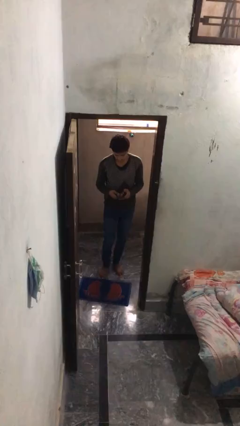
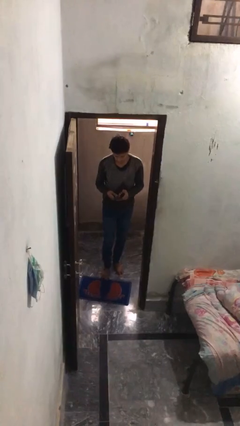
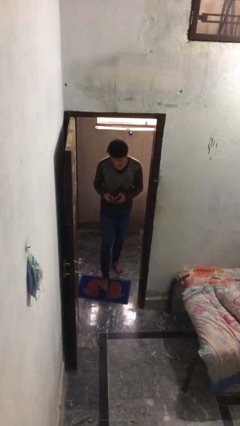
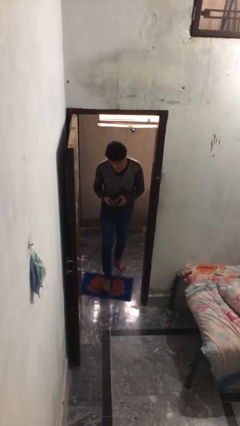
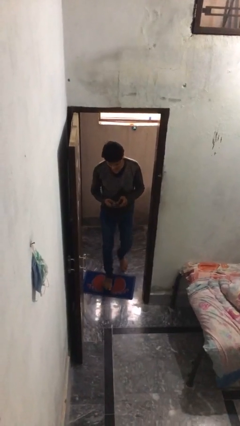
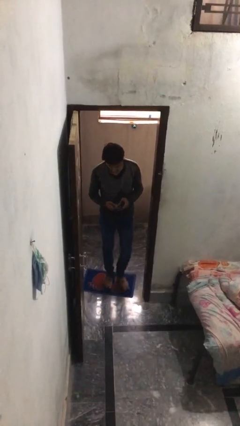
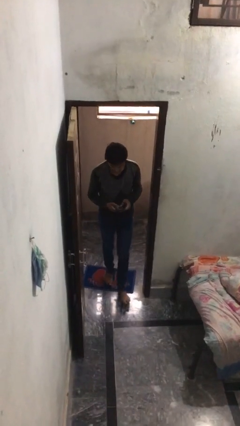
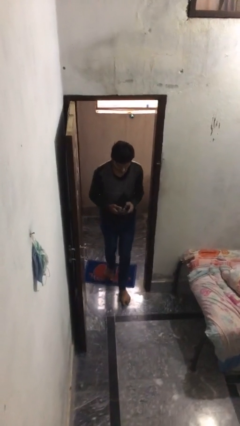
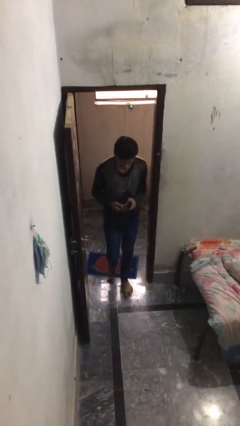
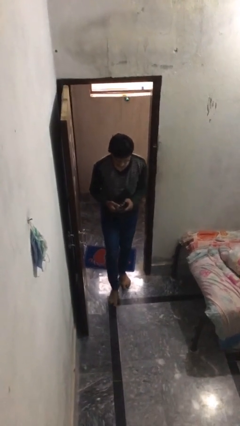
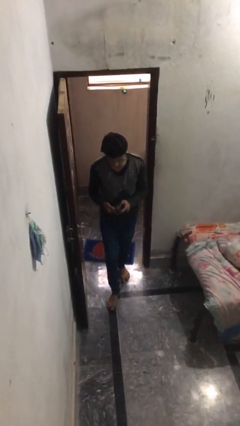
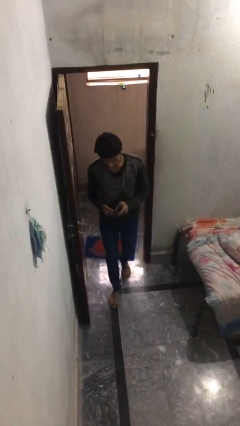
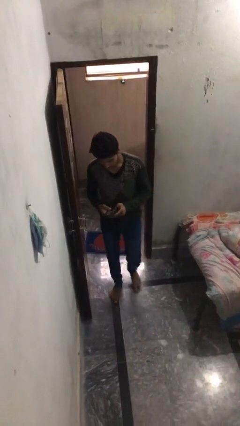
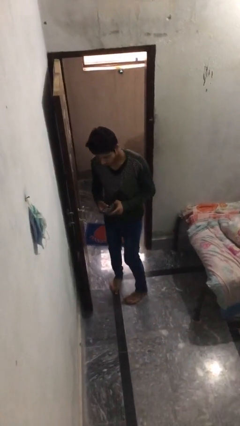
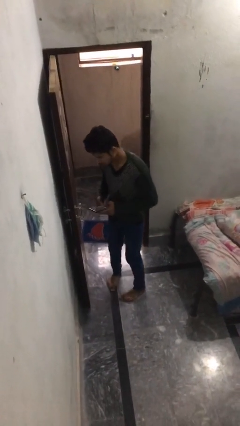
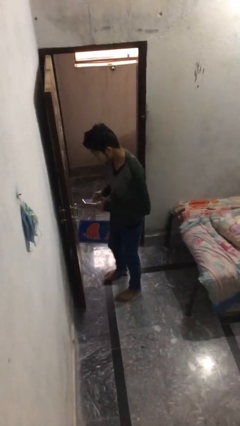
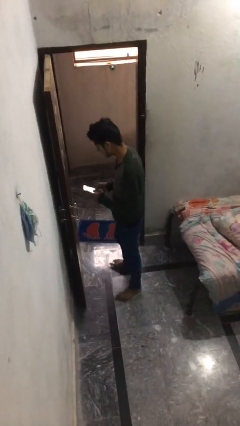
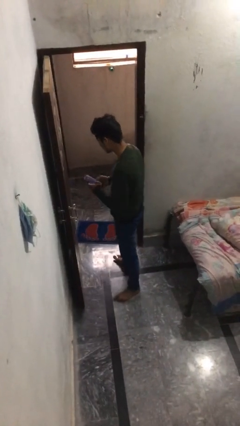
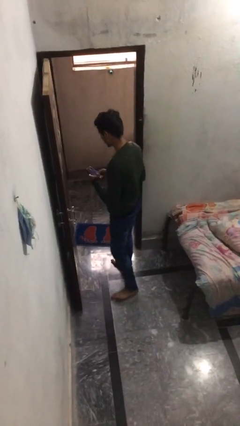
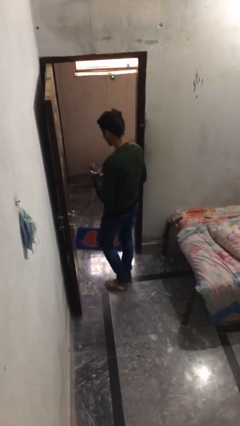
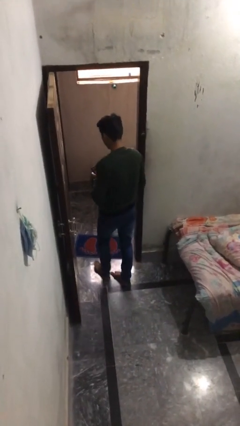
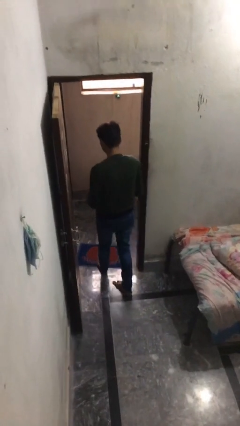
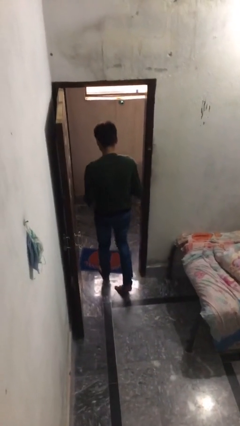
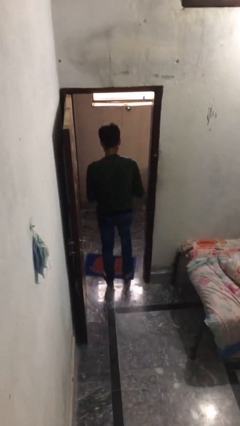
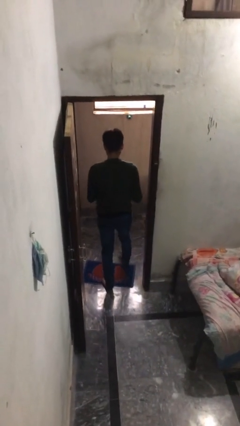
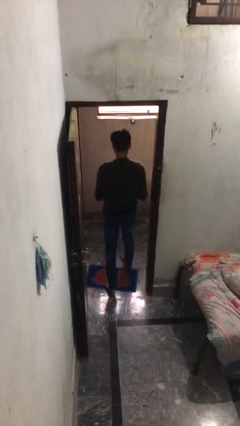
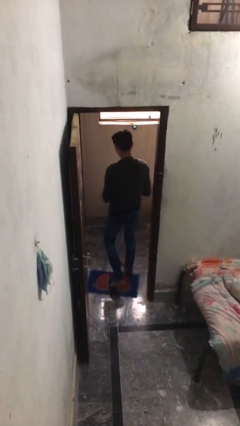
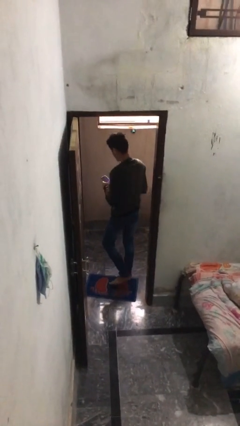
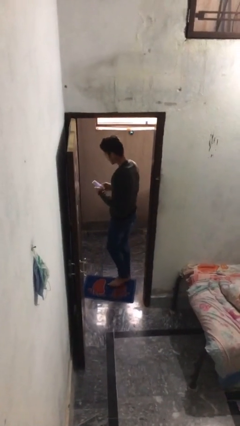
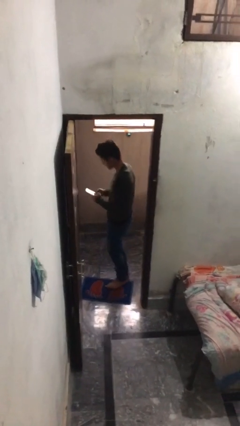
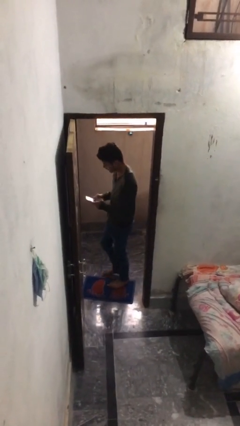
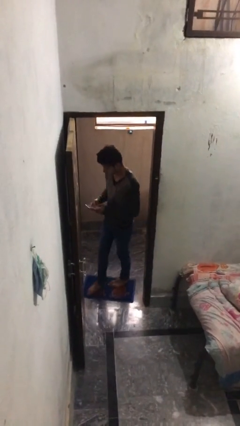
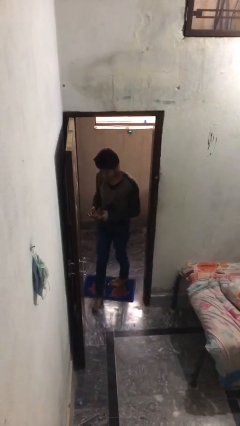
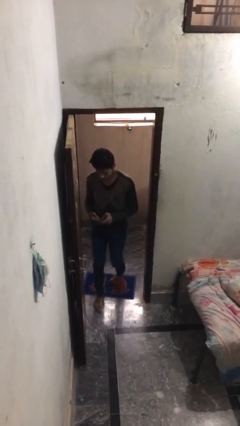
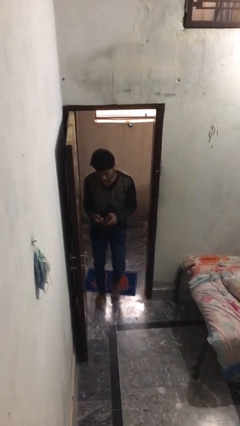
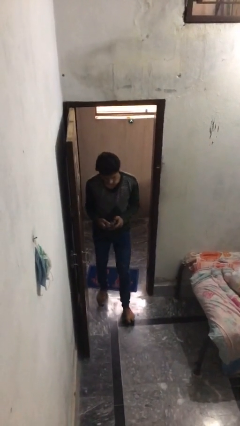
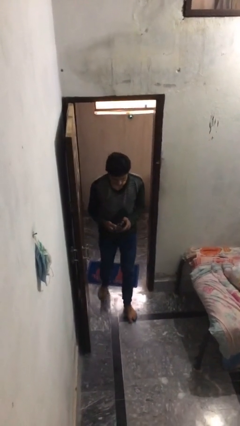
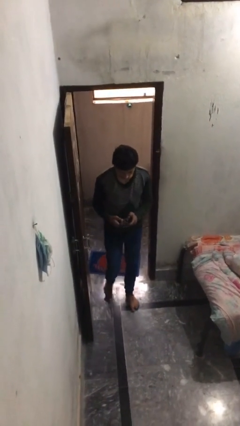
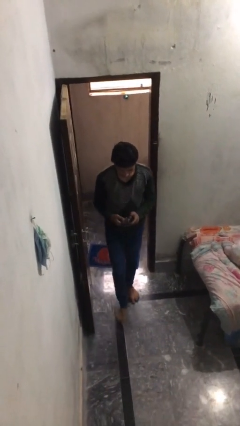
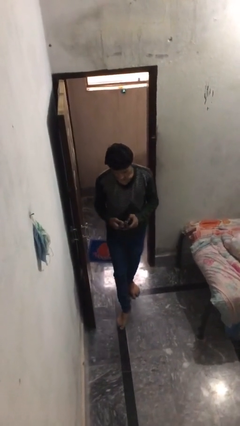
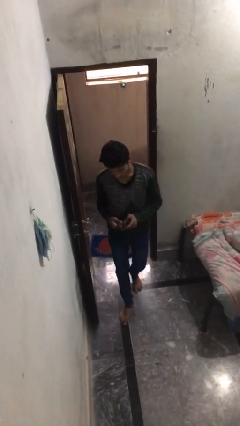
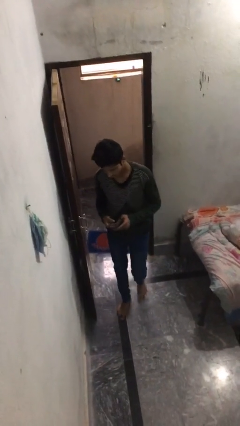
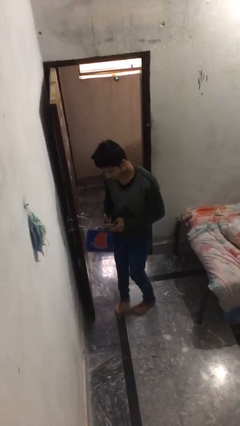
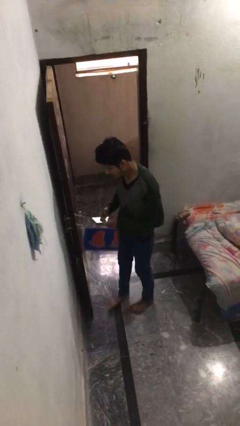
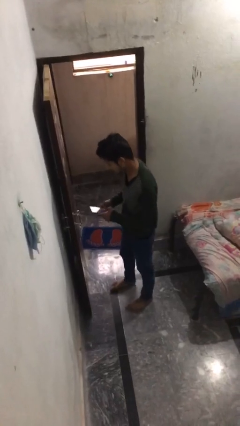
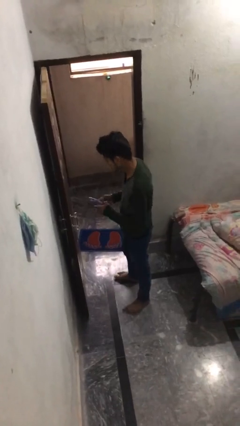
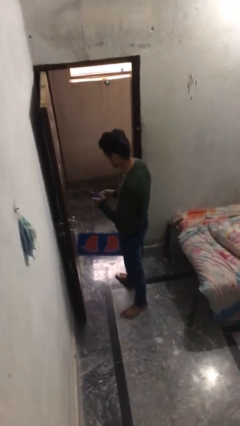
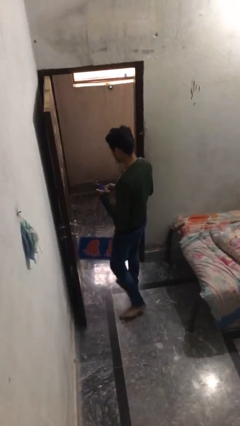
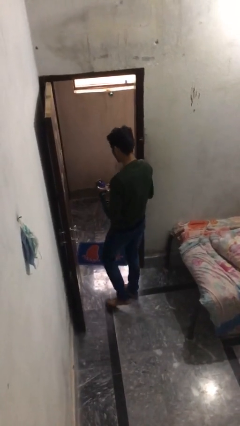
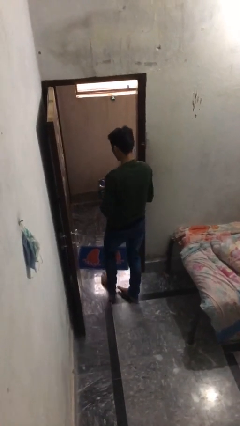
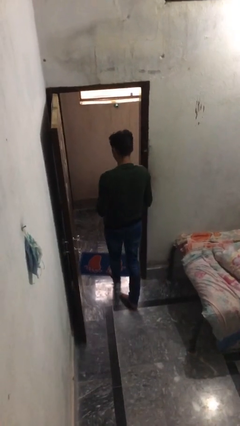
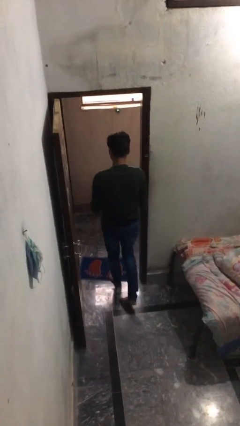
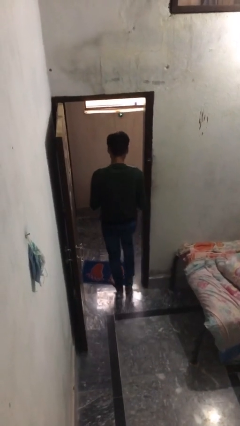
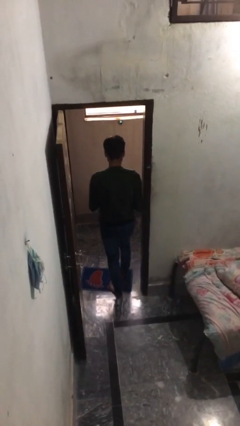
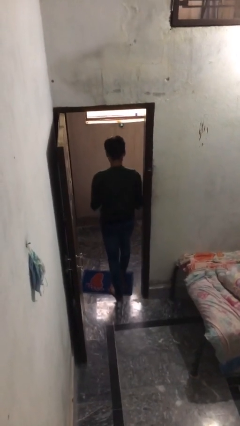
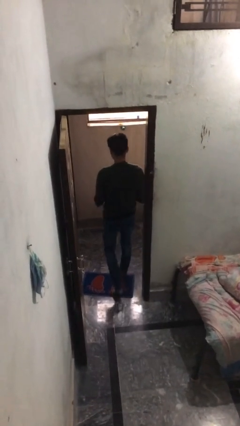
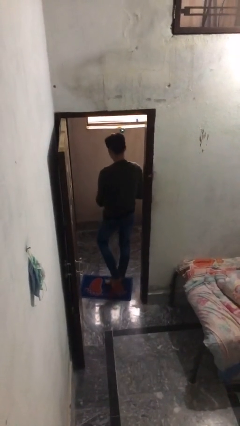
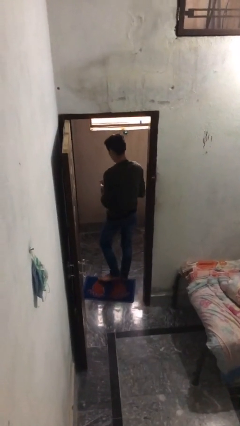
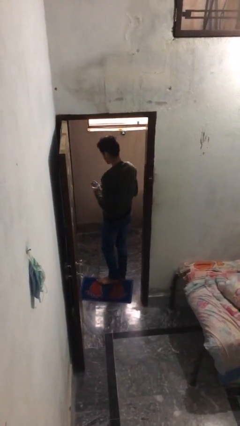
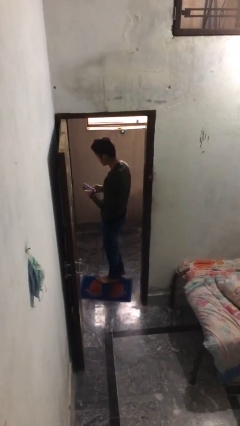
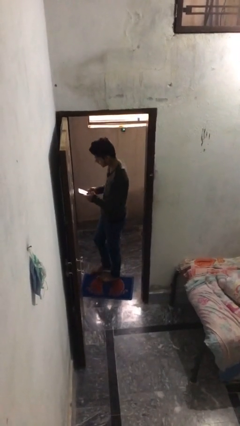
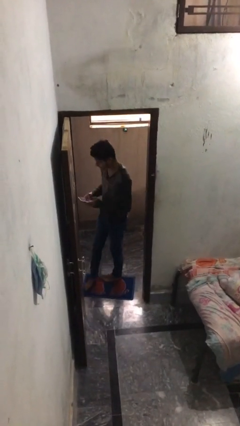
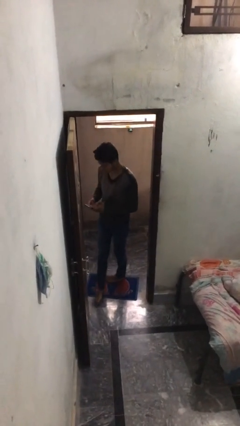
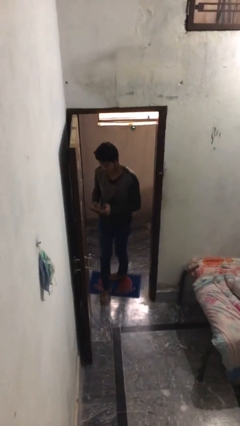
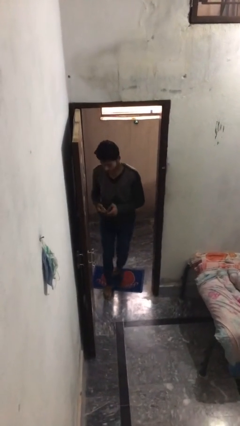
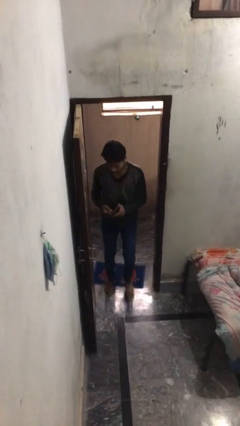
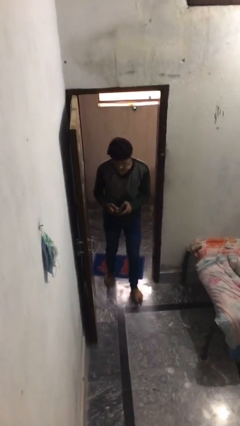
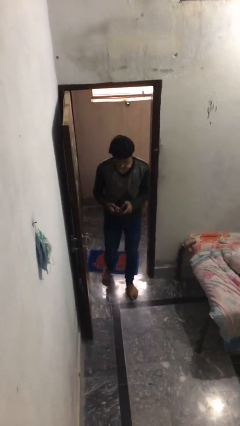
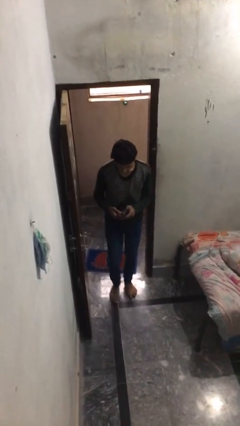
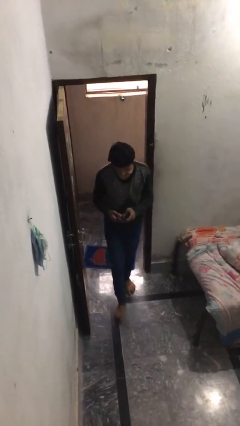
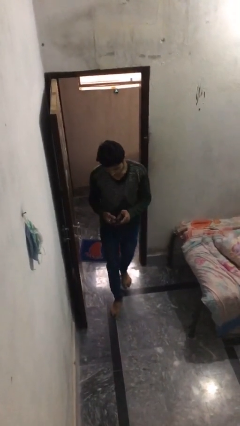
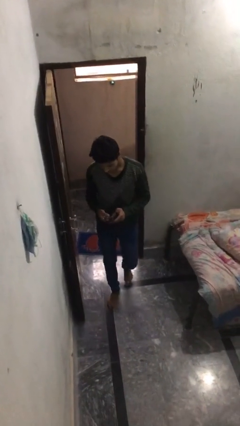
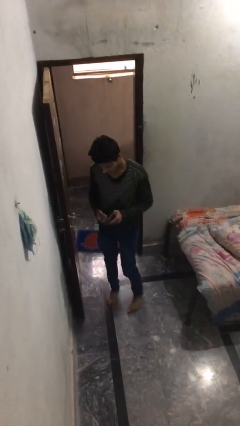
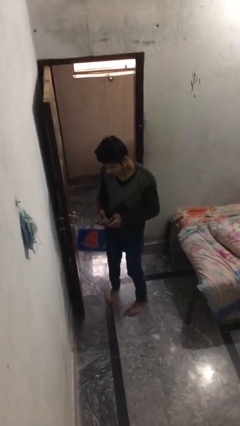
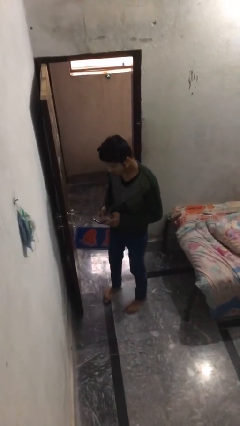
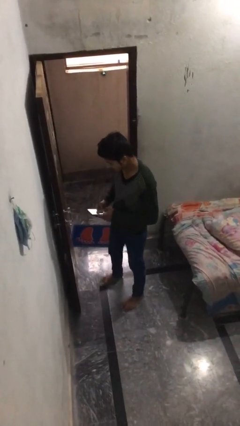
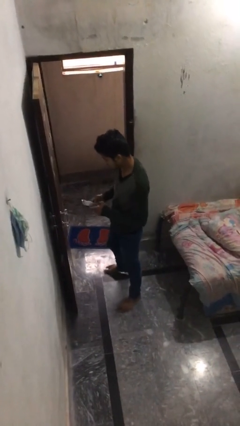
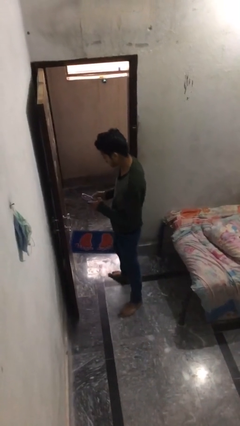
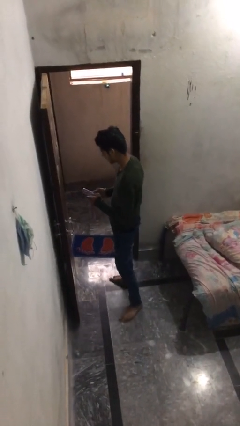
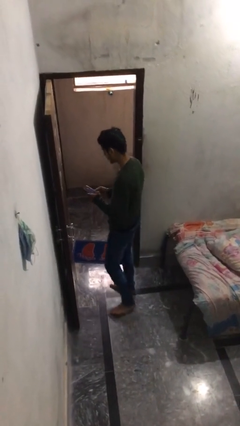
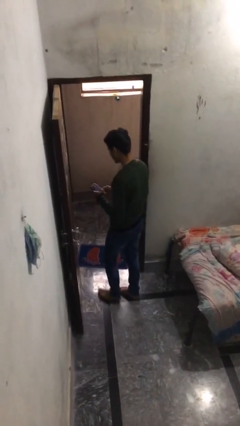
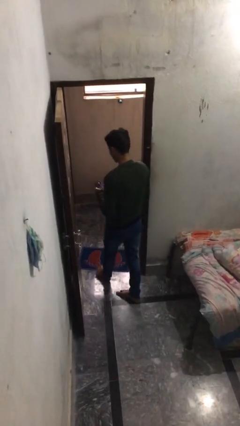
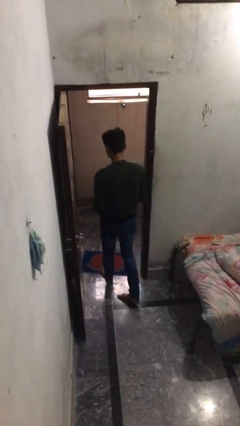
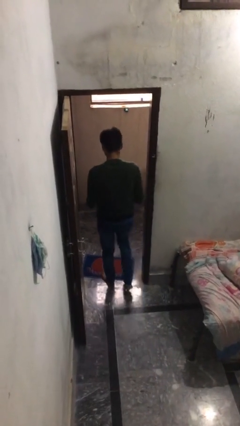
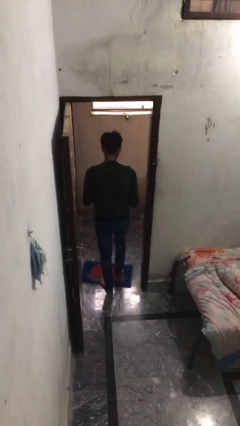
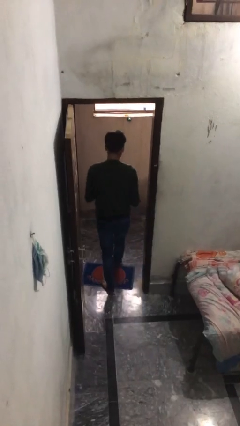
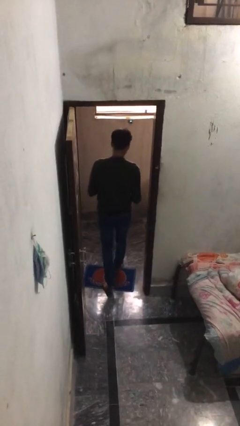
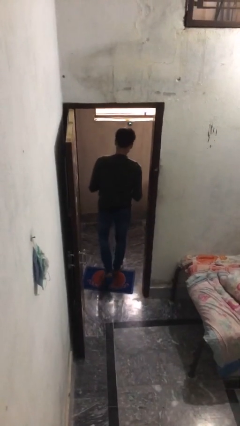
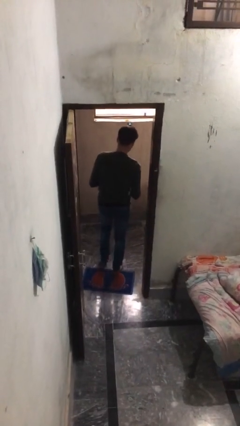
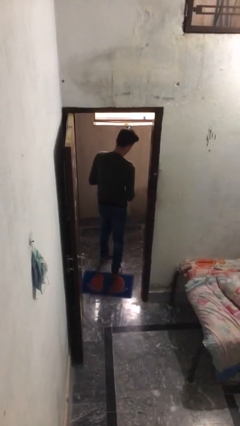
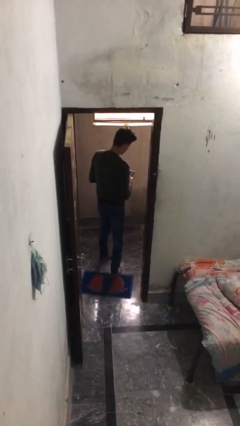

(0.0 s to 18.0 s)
person texts on phone

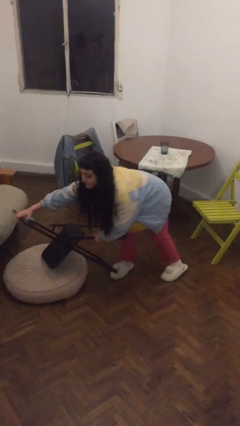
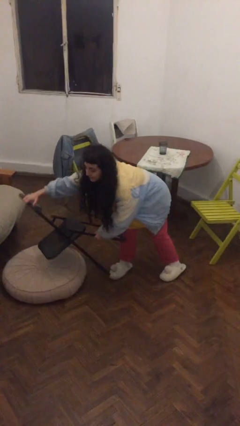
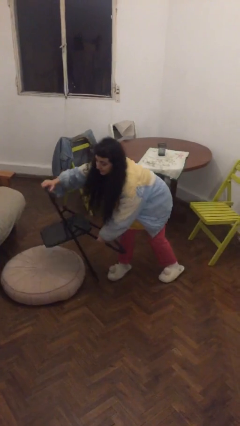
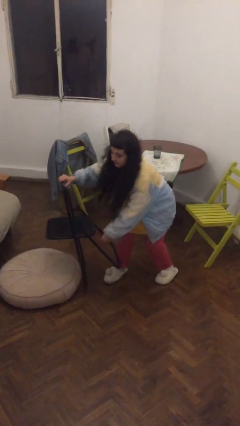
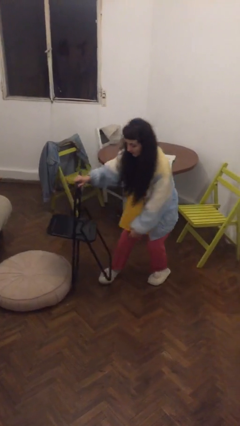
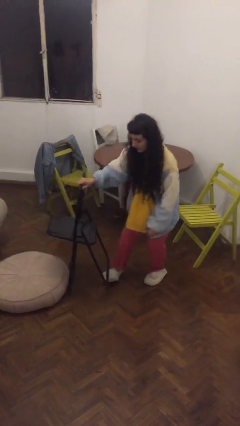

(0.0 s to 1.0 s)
person sets upright furniture
